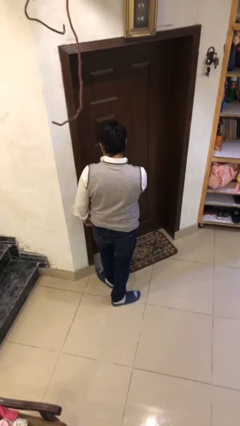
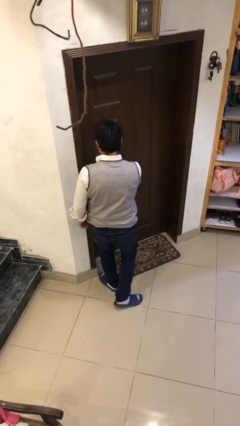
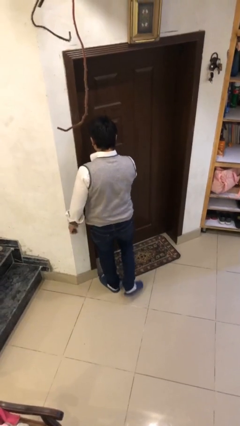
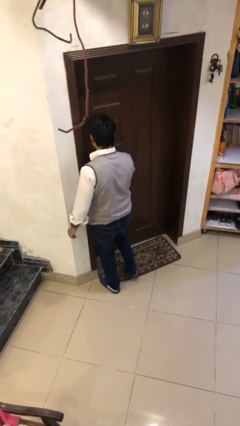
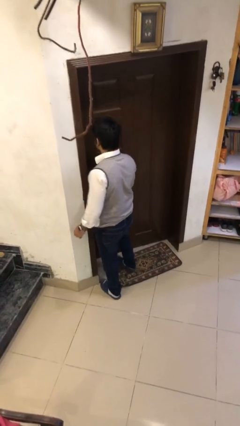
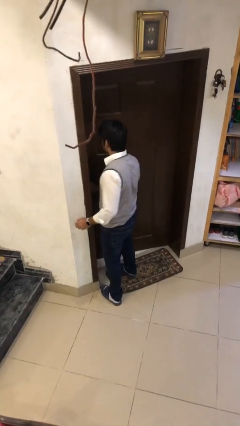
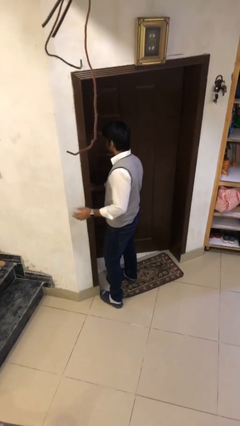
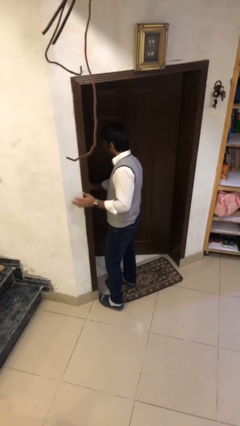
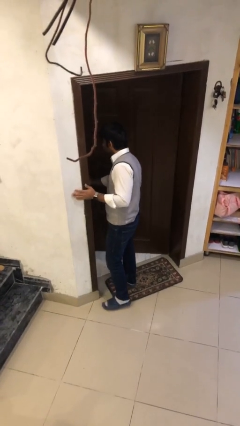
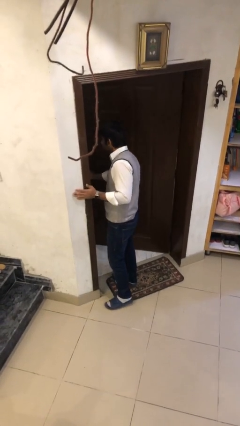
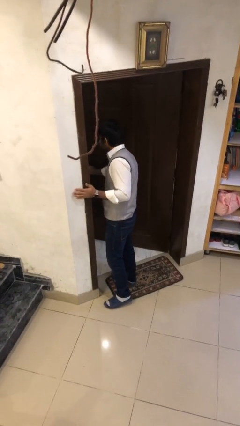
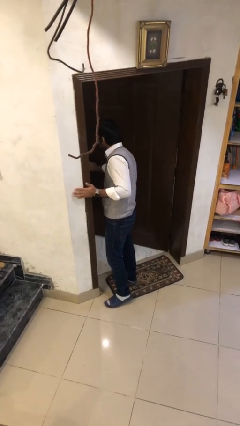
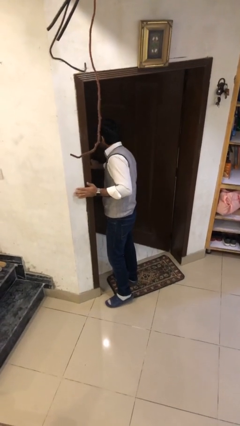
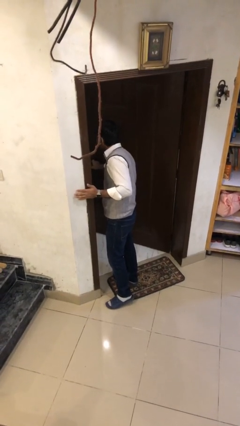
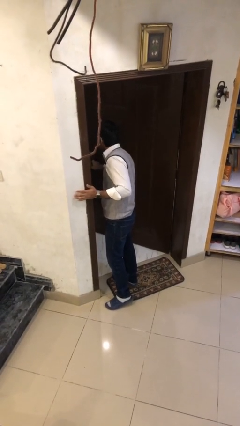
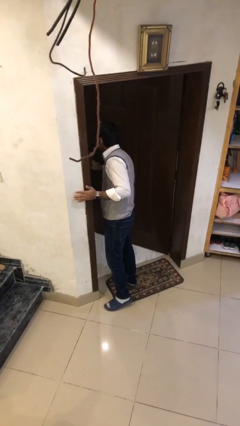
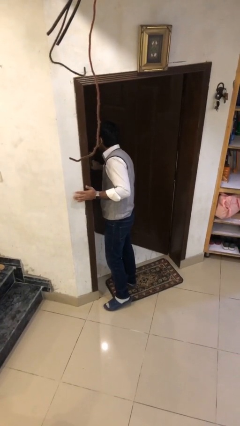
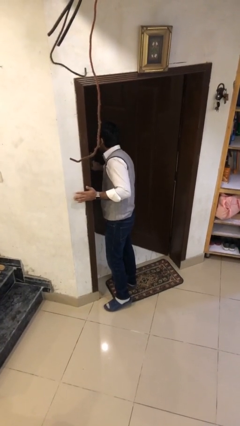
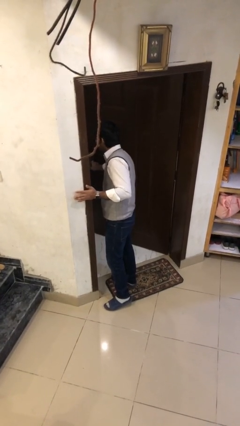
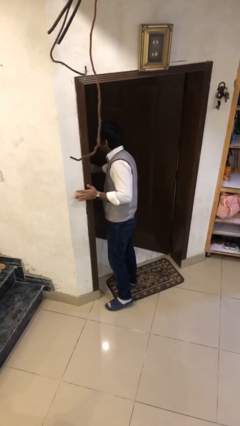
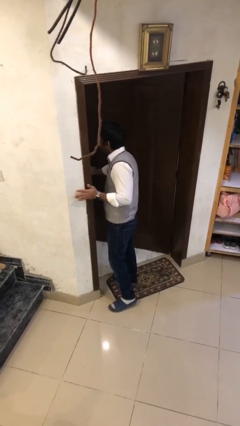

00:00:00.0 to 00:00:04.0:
person opens facility door

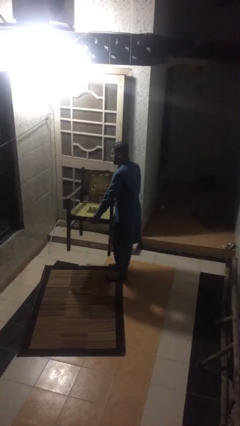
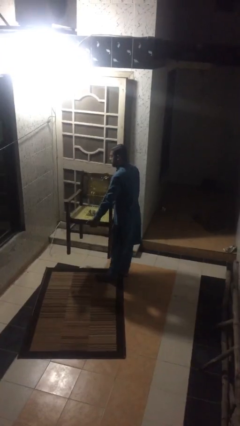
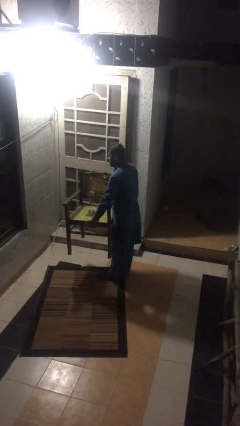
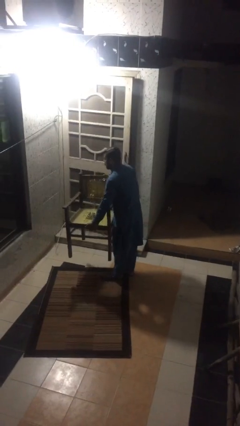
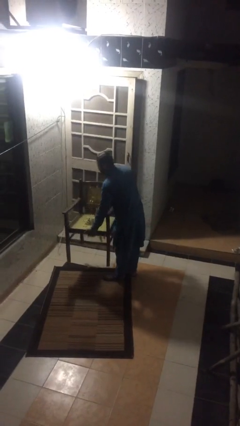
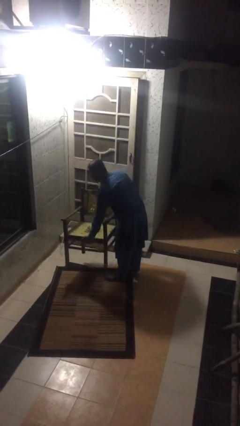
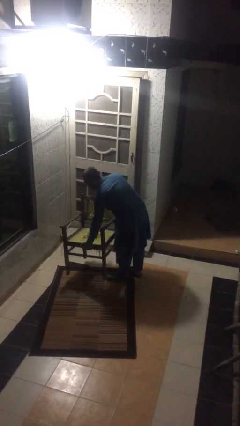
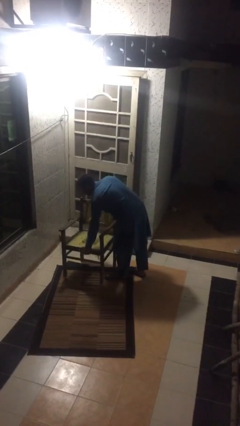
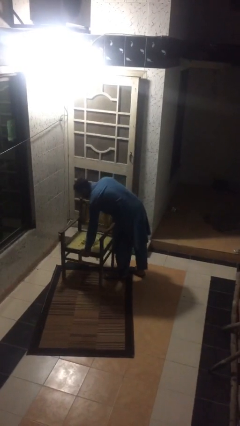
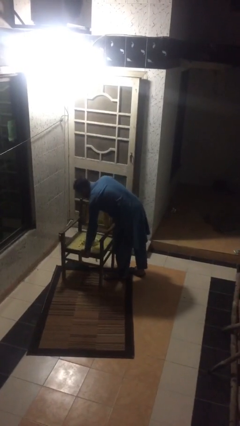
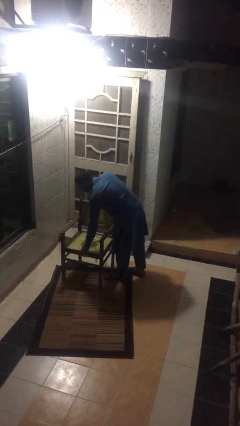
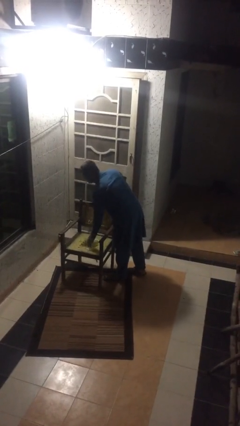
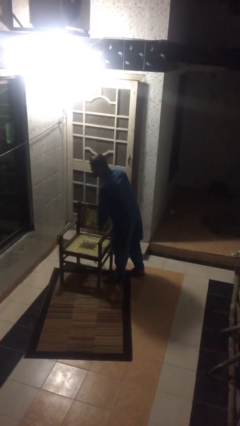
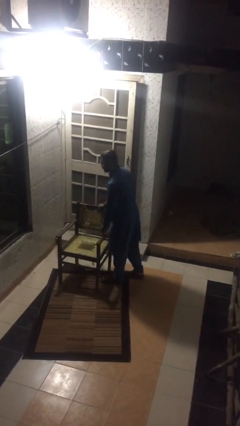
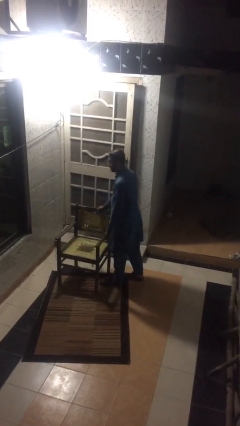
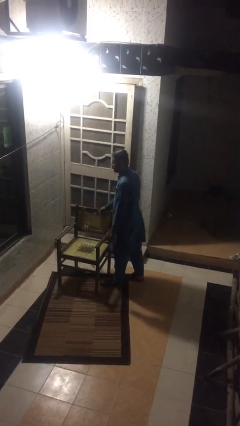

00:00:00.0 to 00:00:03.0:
person puts down object on floor

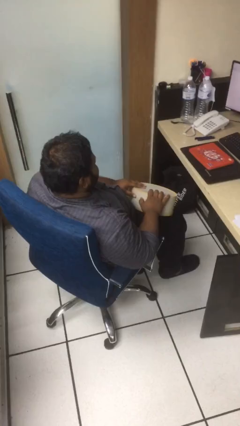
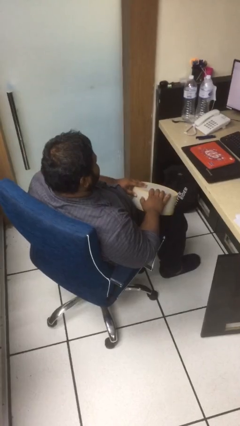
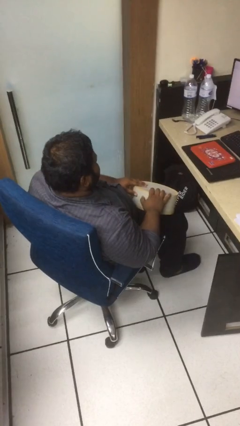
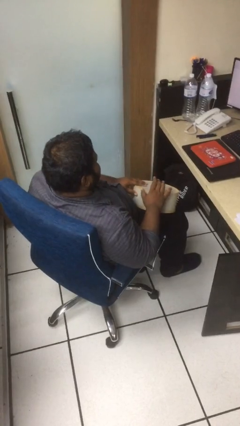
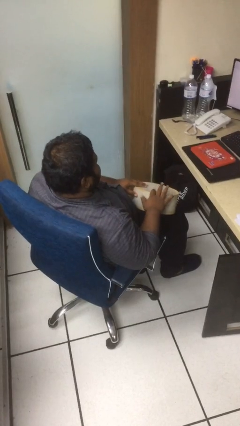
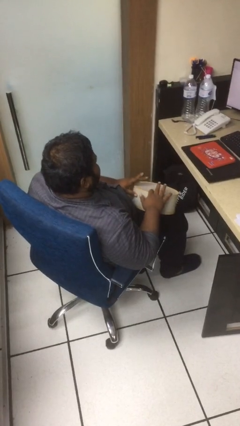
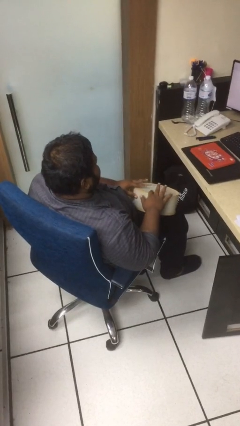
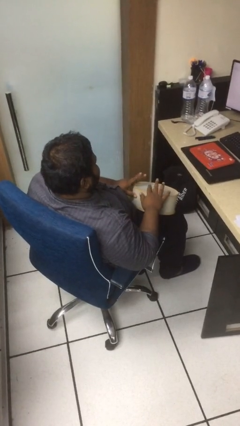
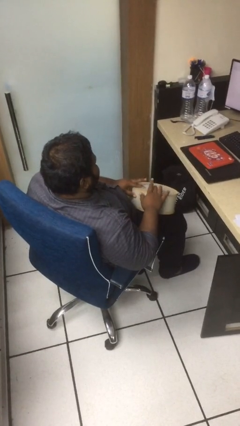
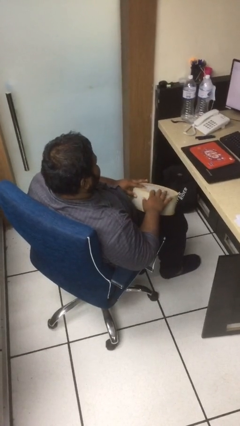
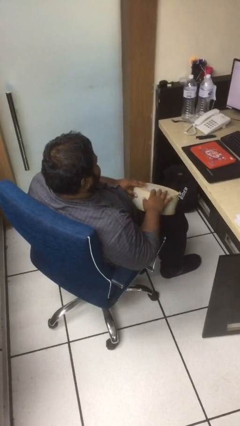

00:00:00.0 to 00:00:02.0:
person taps object with finger

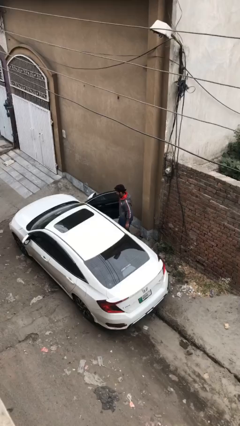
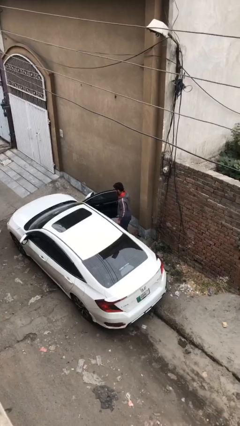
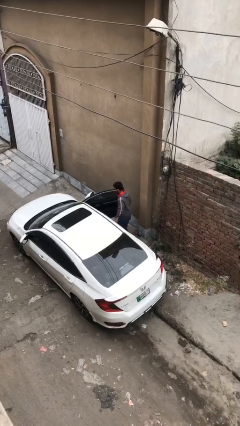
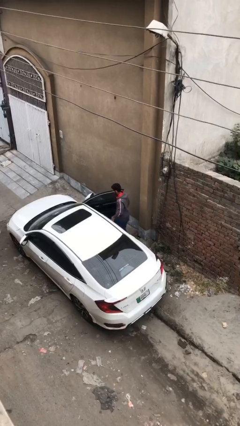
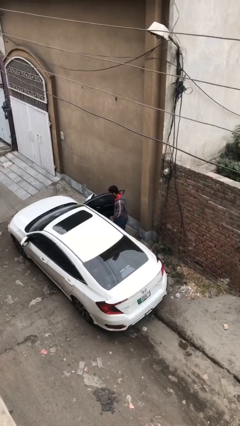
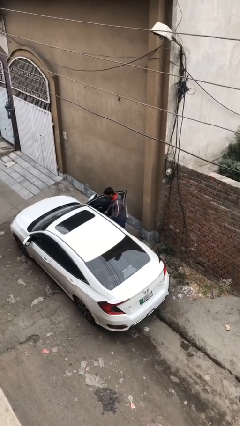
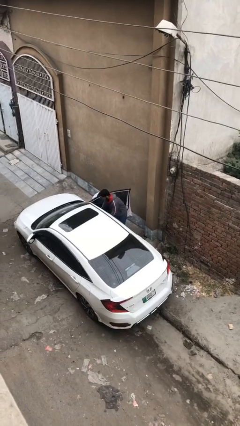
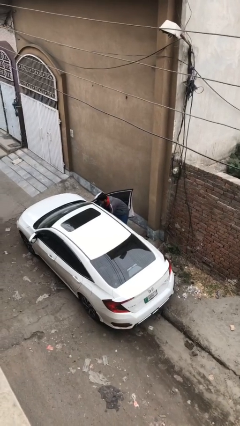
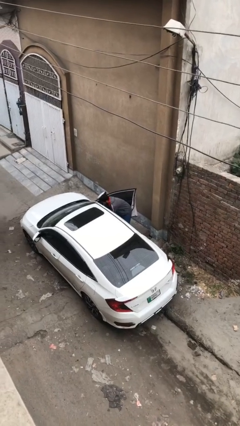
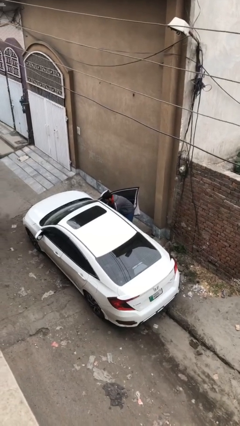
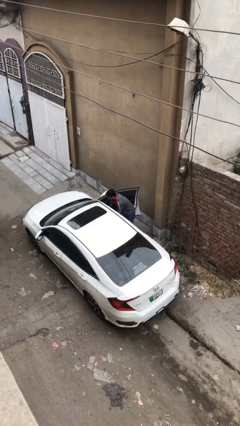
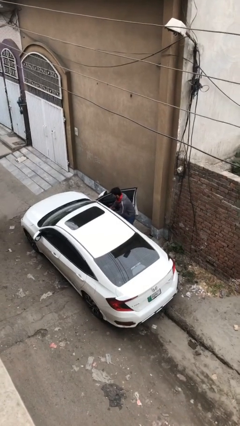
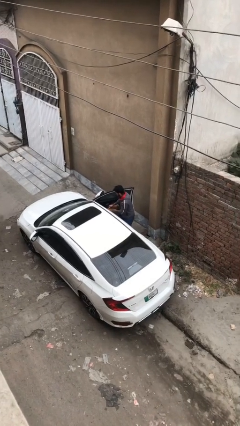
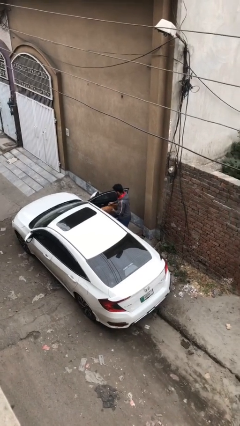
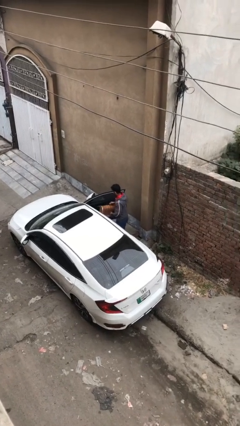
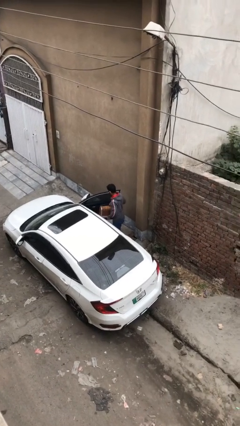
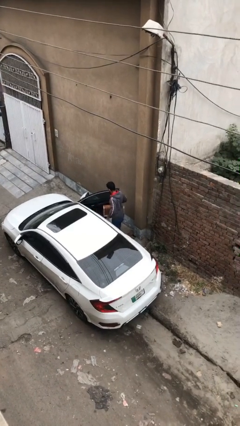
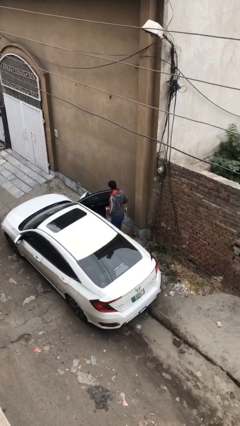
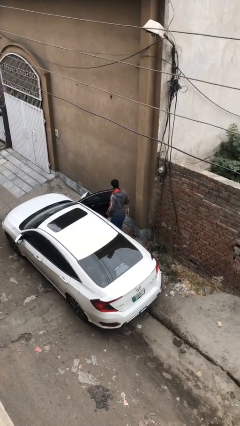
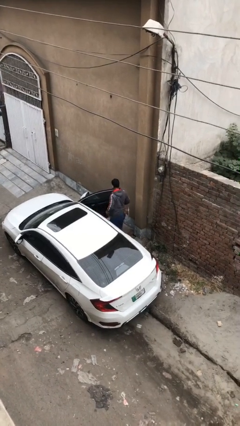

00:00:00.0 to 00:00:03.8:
person unloads car

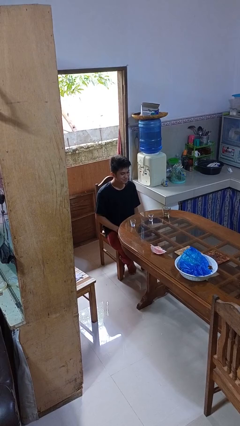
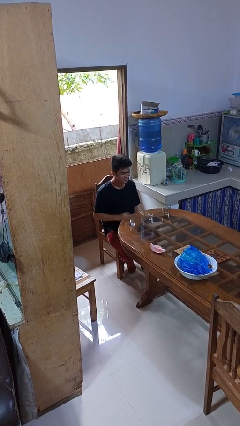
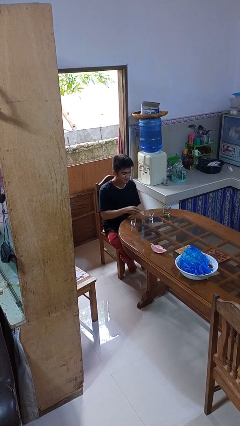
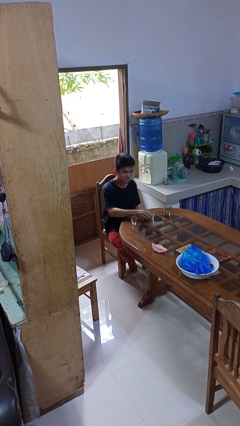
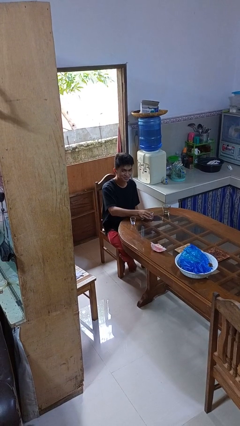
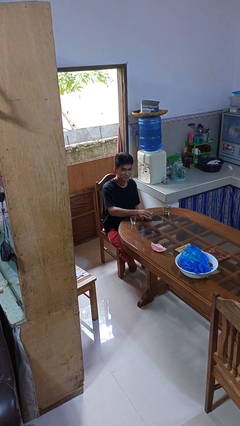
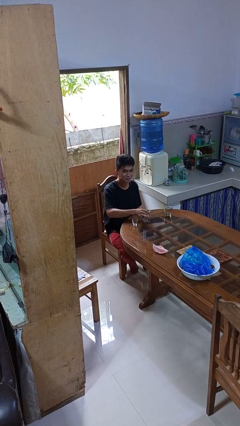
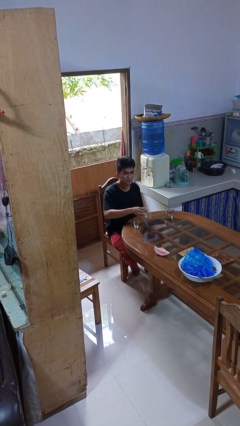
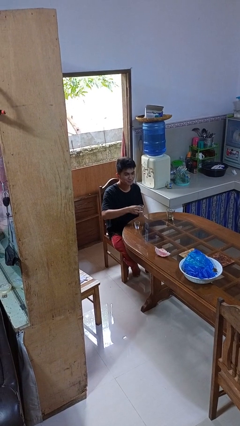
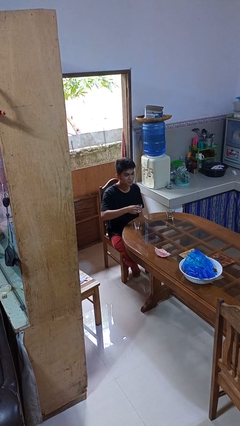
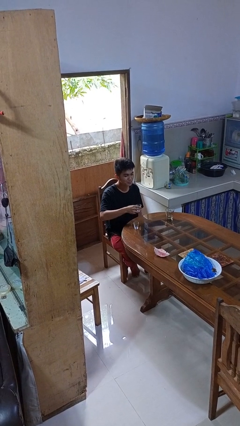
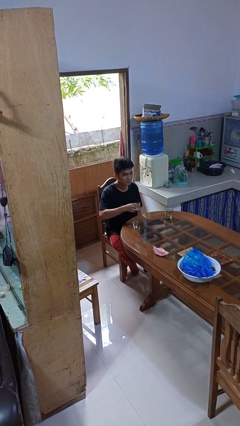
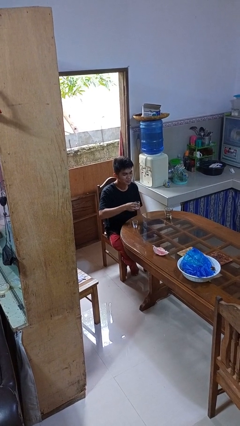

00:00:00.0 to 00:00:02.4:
person picks up object from table

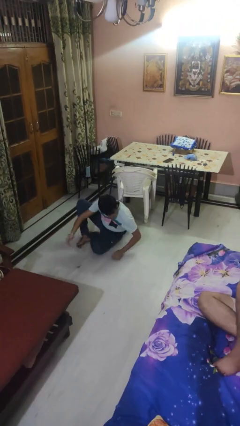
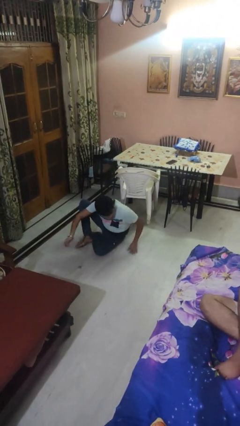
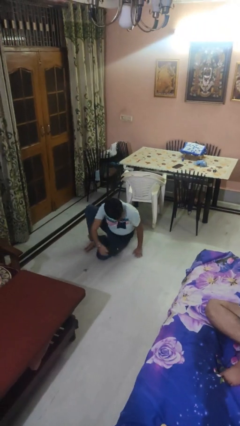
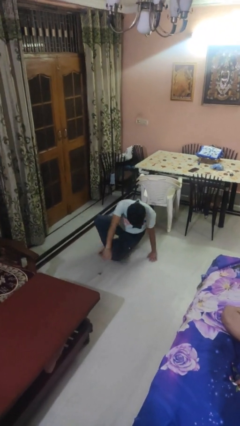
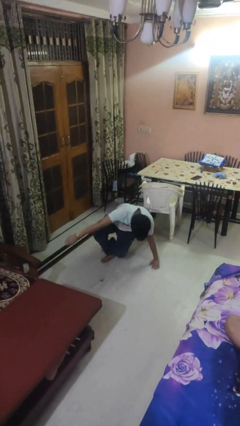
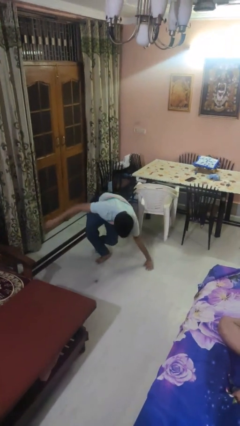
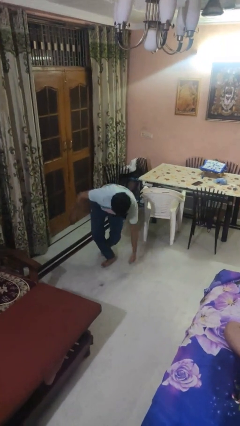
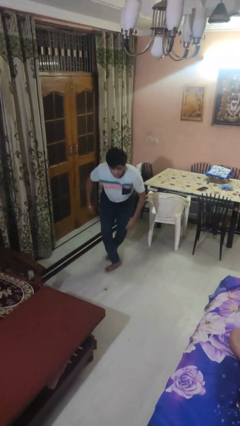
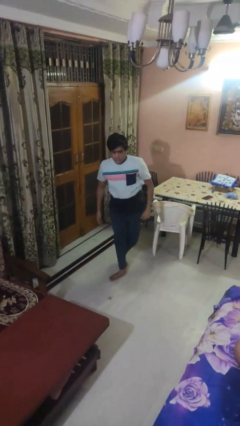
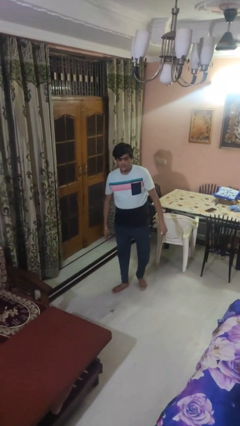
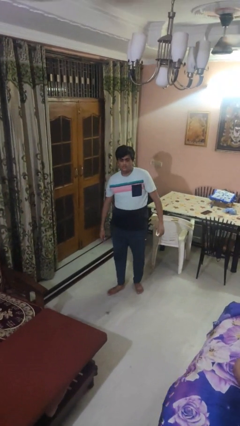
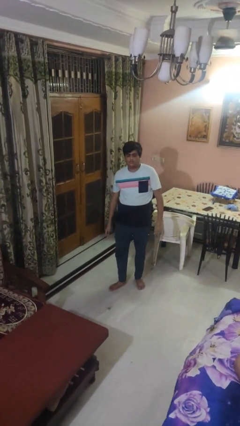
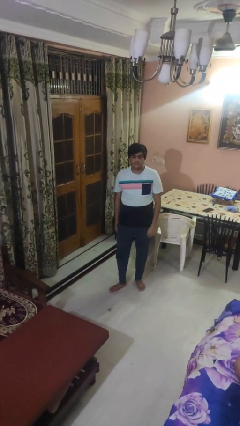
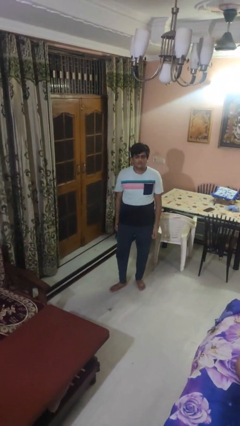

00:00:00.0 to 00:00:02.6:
person stands up from floor
